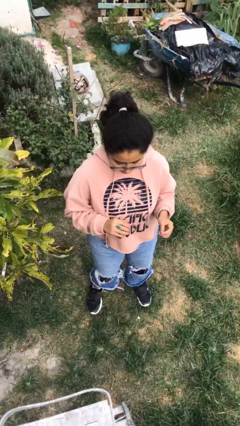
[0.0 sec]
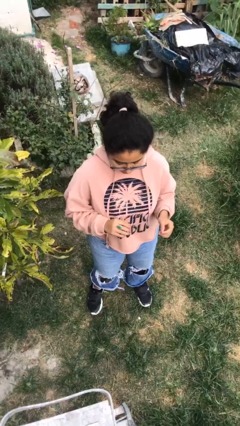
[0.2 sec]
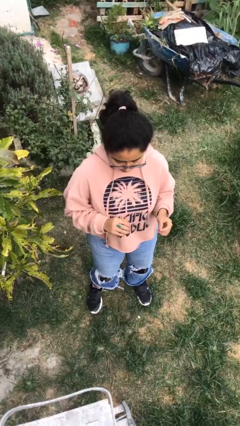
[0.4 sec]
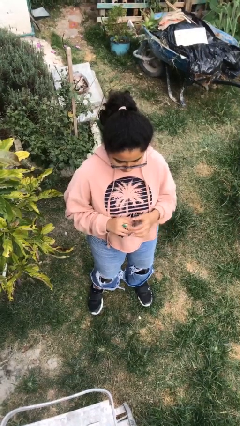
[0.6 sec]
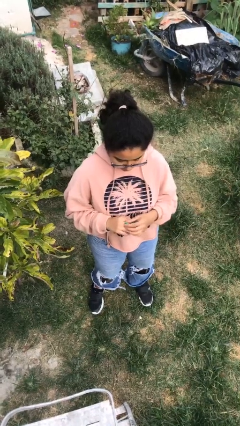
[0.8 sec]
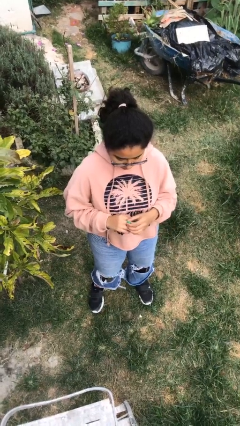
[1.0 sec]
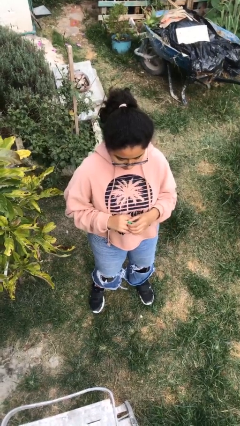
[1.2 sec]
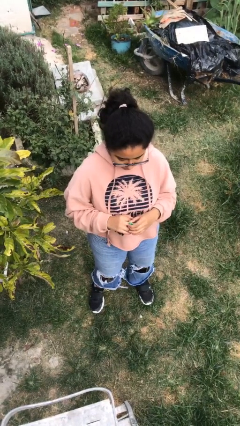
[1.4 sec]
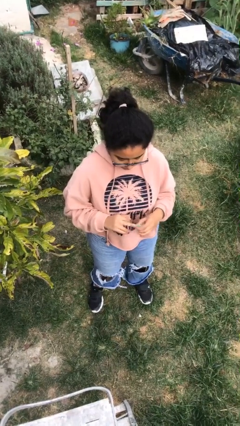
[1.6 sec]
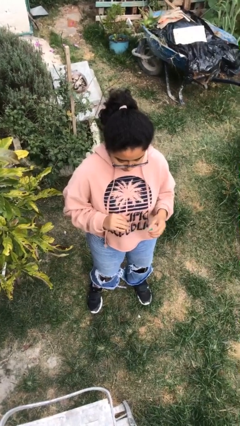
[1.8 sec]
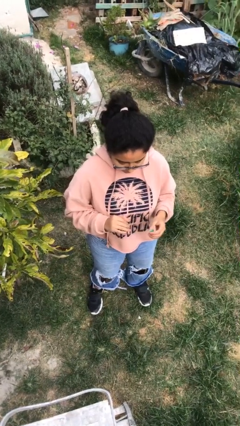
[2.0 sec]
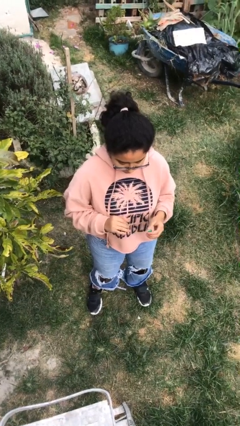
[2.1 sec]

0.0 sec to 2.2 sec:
person takes off ring

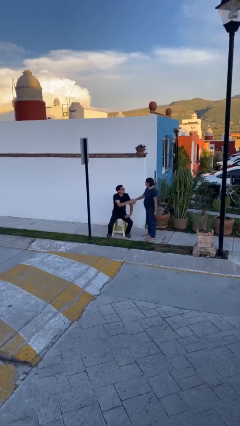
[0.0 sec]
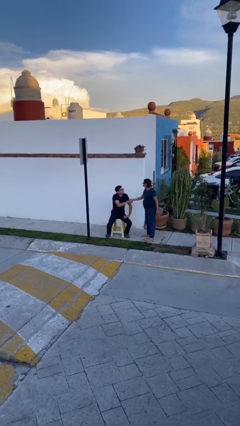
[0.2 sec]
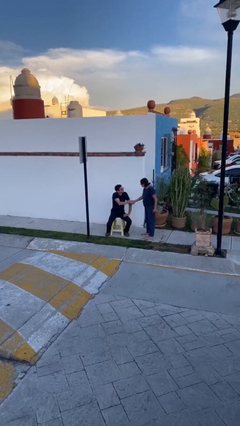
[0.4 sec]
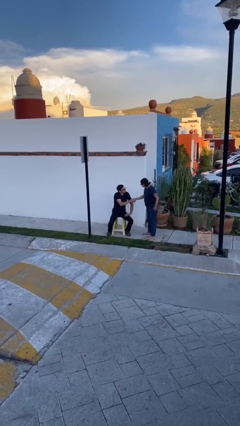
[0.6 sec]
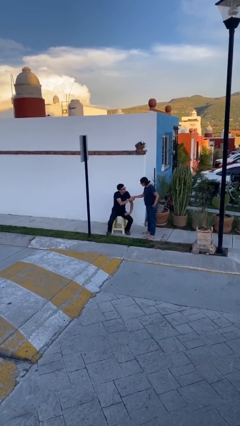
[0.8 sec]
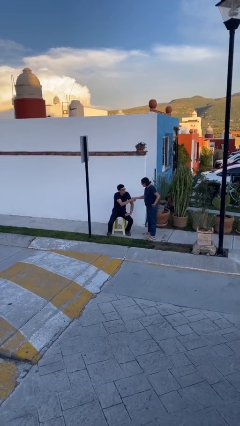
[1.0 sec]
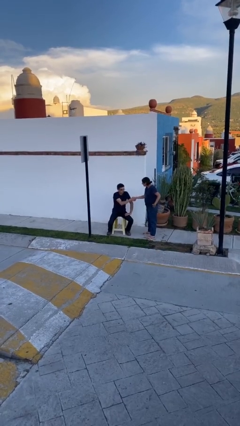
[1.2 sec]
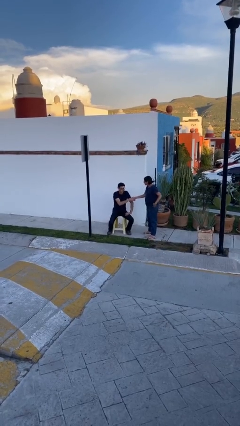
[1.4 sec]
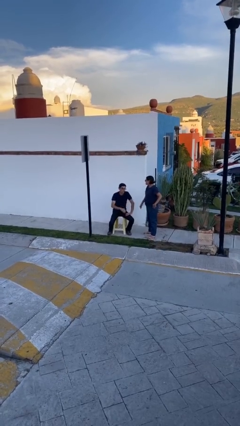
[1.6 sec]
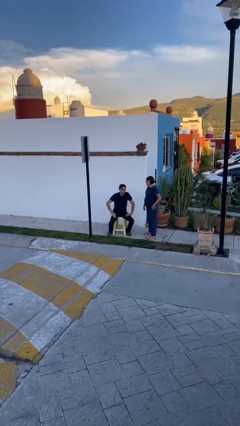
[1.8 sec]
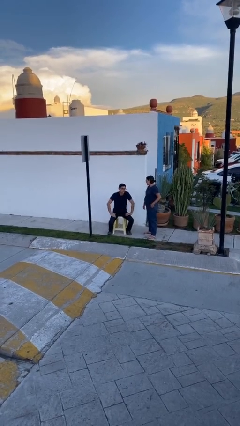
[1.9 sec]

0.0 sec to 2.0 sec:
person shakes hand

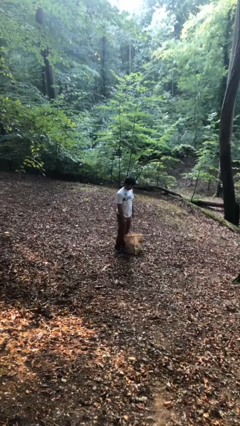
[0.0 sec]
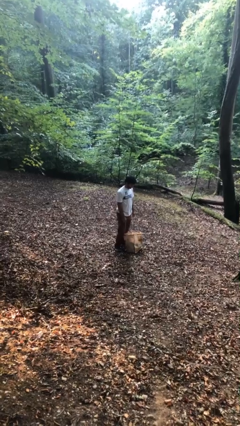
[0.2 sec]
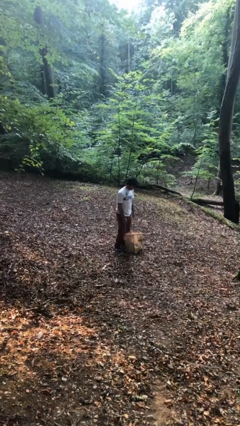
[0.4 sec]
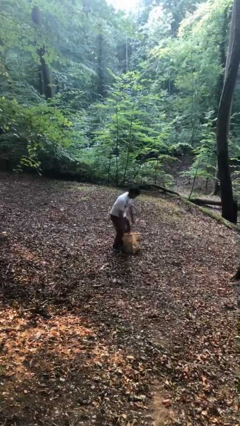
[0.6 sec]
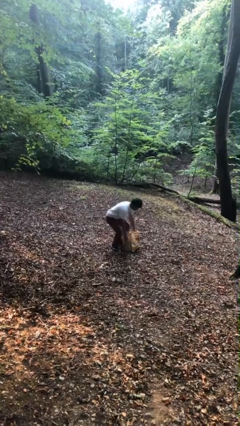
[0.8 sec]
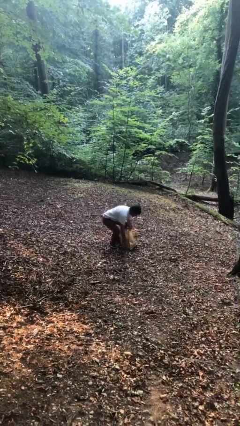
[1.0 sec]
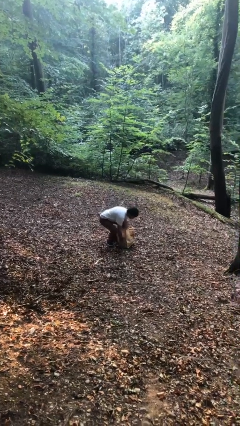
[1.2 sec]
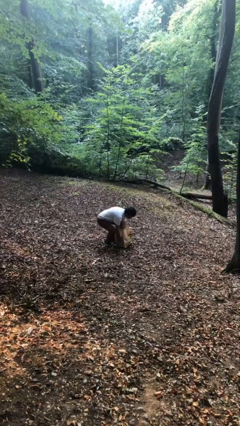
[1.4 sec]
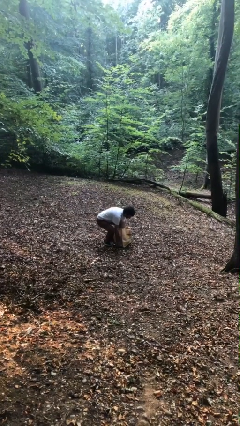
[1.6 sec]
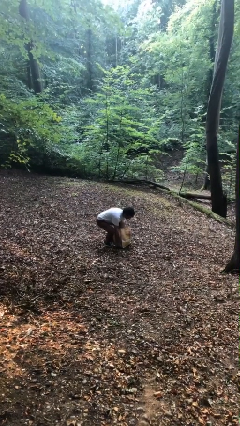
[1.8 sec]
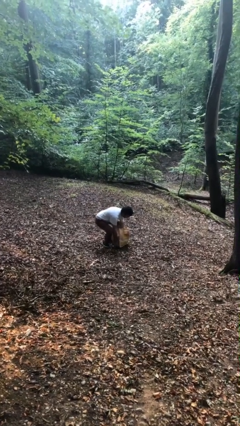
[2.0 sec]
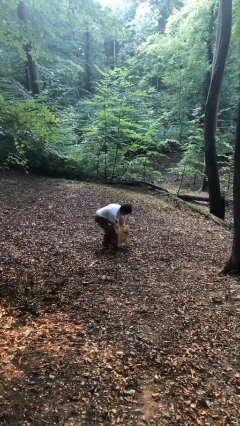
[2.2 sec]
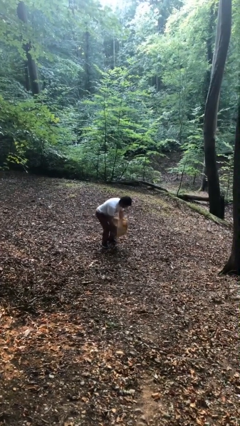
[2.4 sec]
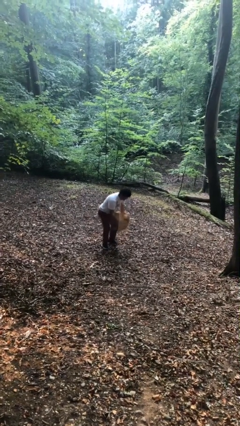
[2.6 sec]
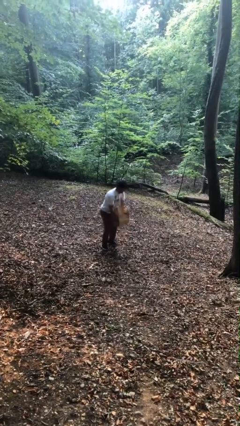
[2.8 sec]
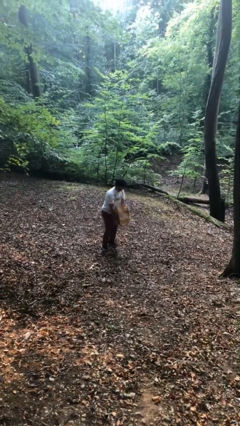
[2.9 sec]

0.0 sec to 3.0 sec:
person picks up object from floor

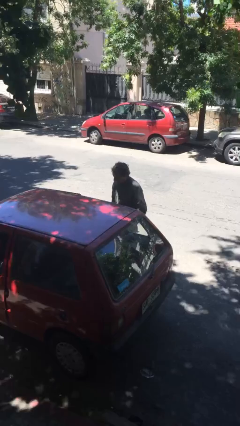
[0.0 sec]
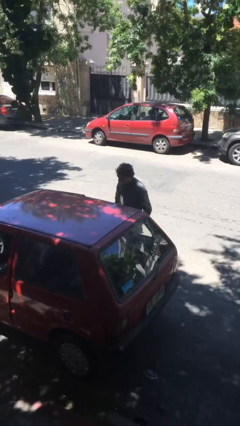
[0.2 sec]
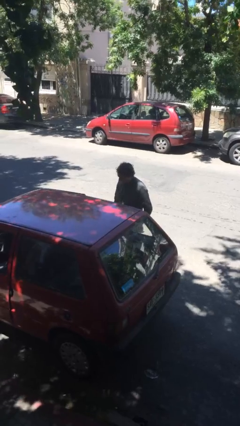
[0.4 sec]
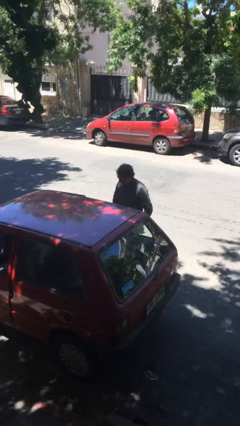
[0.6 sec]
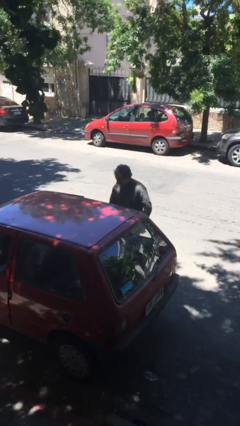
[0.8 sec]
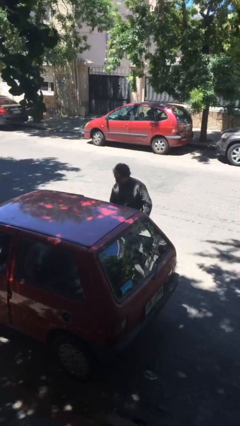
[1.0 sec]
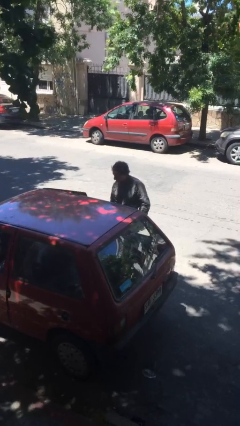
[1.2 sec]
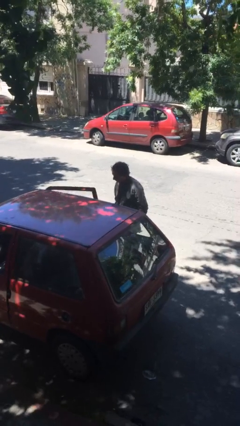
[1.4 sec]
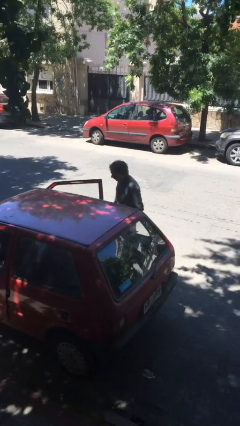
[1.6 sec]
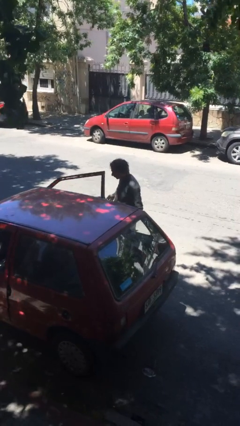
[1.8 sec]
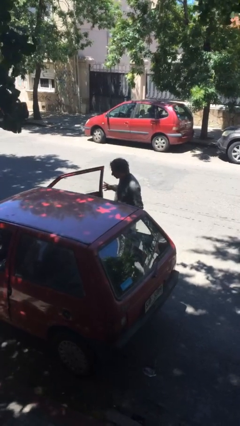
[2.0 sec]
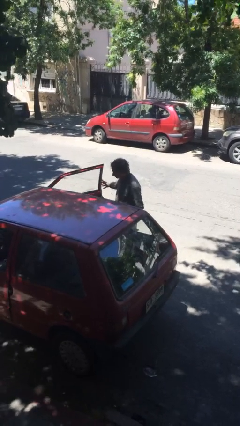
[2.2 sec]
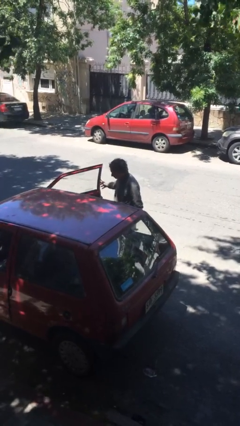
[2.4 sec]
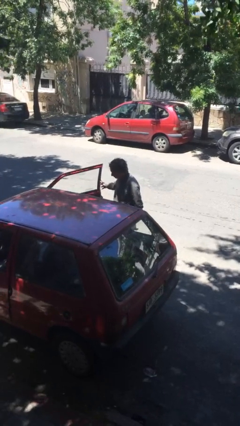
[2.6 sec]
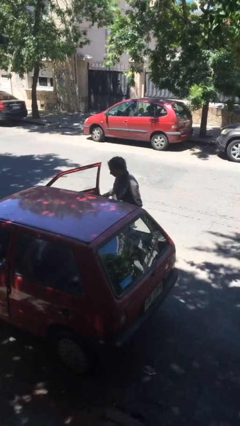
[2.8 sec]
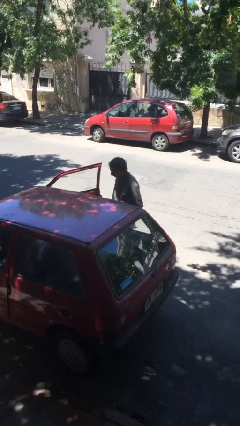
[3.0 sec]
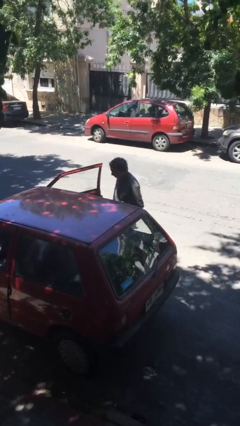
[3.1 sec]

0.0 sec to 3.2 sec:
person opens car door

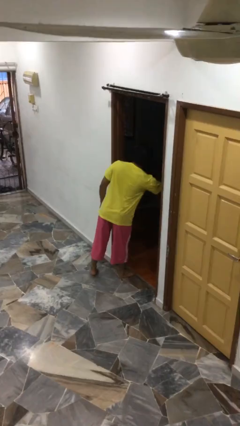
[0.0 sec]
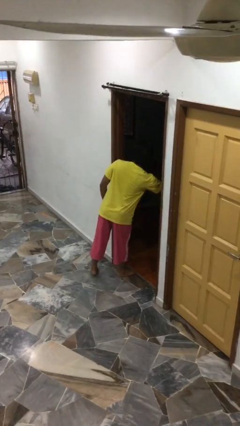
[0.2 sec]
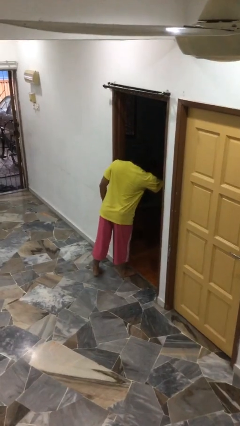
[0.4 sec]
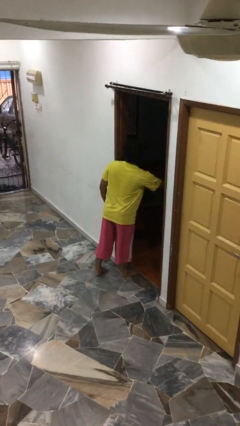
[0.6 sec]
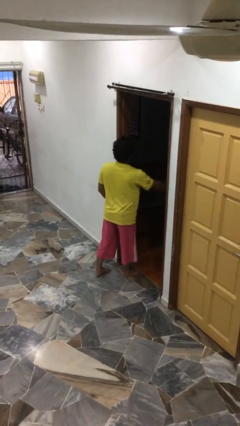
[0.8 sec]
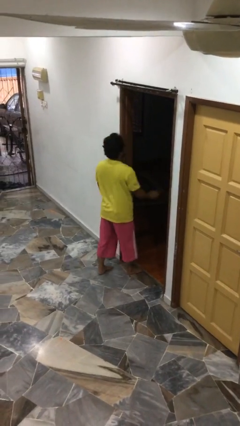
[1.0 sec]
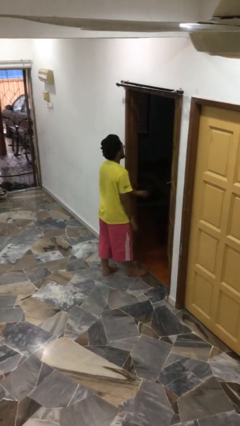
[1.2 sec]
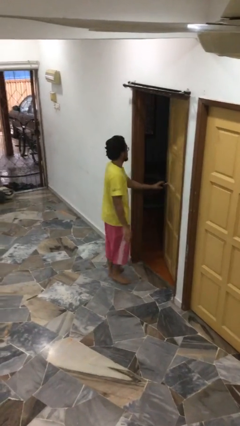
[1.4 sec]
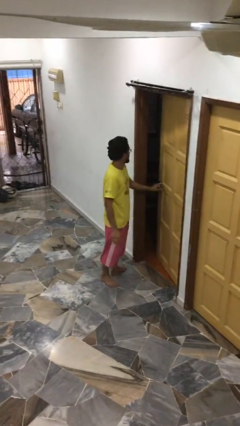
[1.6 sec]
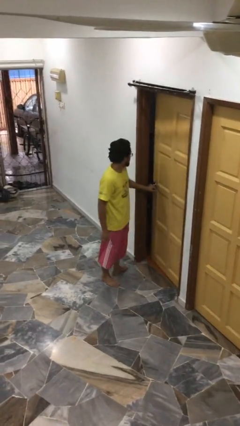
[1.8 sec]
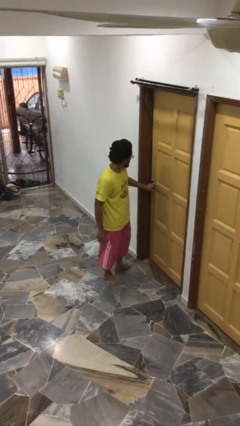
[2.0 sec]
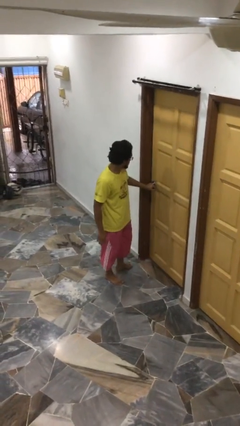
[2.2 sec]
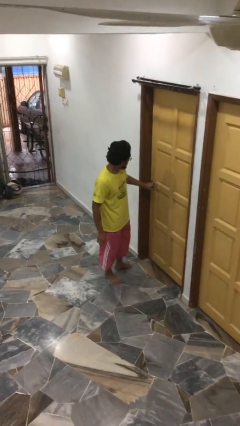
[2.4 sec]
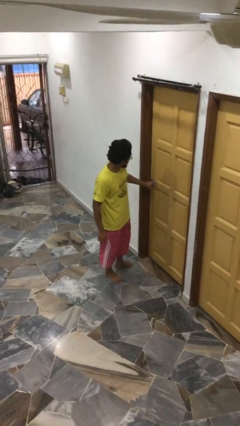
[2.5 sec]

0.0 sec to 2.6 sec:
person closes facility door

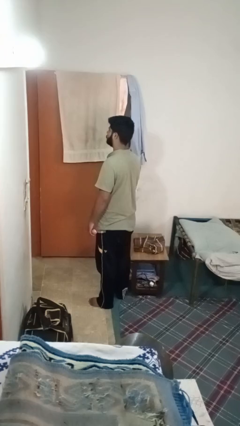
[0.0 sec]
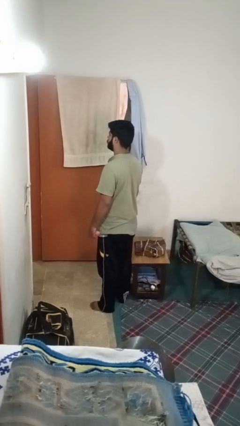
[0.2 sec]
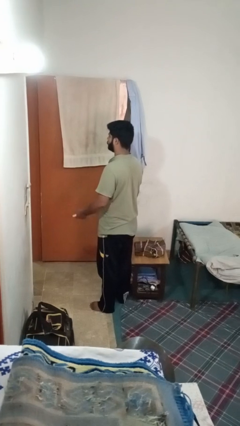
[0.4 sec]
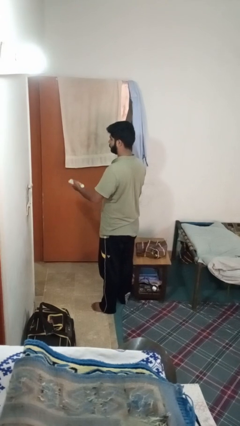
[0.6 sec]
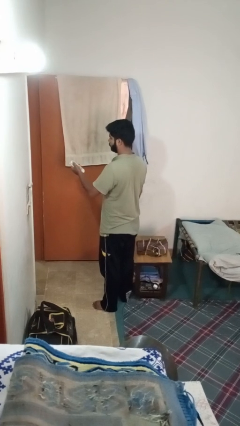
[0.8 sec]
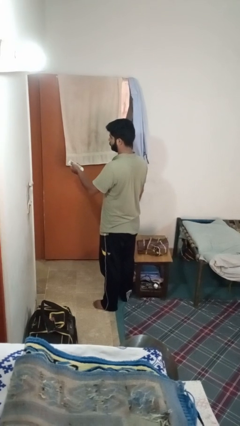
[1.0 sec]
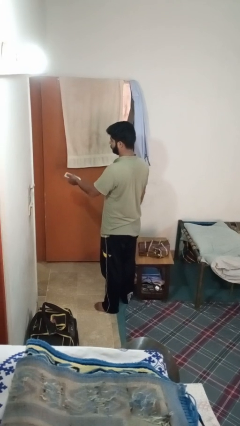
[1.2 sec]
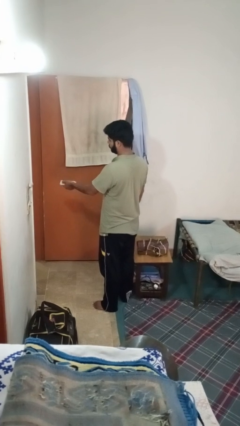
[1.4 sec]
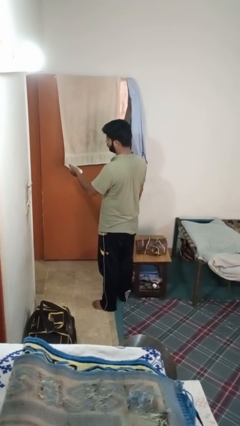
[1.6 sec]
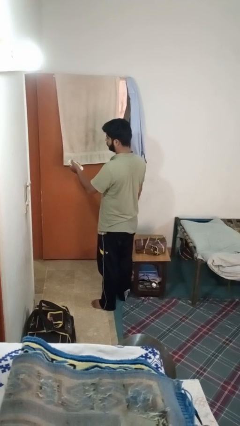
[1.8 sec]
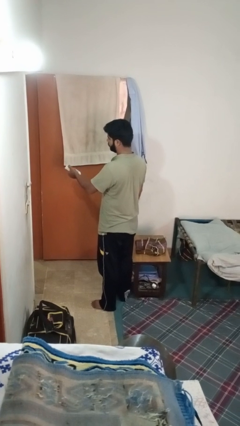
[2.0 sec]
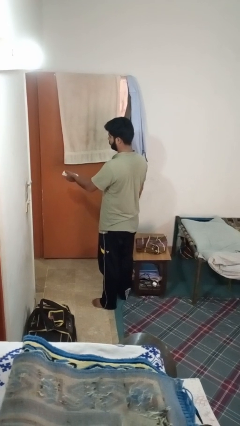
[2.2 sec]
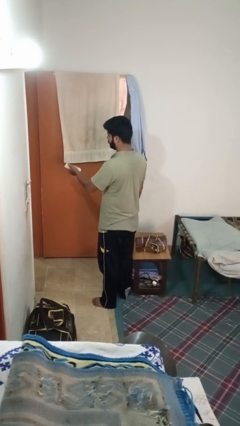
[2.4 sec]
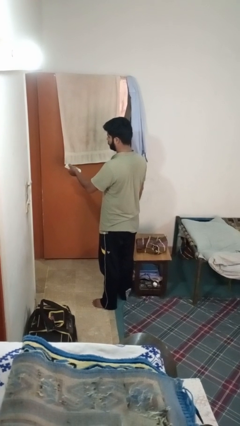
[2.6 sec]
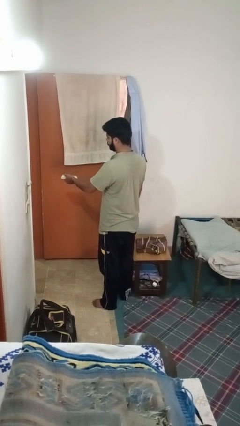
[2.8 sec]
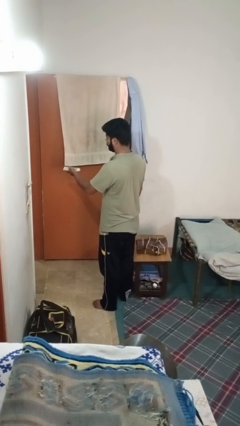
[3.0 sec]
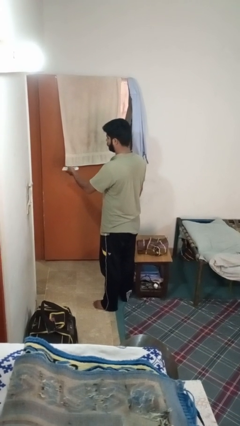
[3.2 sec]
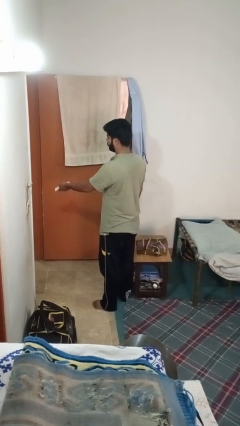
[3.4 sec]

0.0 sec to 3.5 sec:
person uses television remote

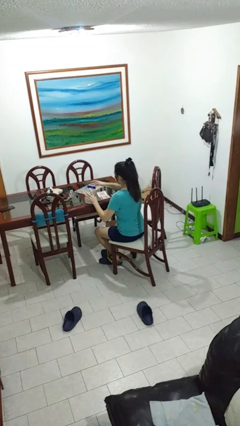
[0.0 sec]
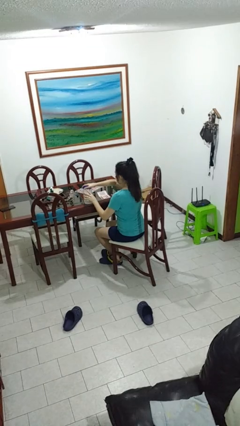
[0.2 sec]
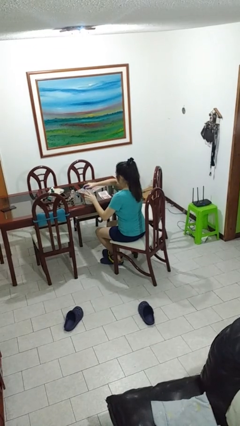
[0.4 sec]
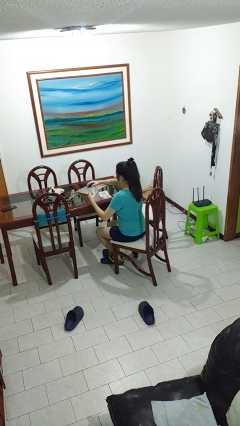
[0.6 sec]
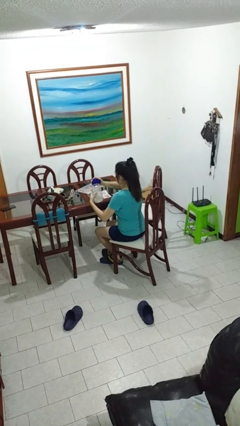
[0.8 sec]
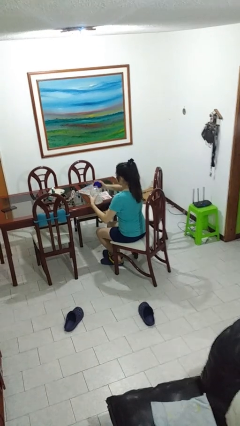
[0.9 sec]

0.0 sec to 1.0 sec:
person opens jar
